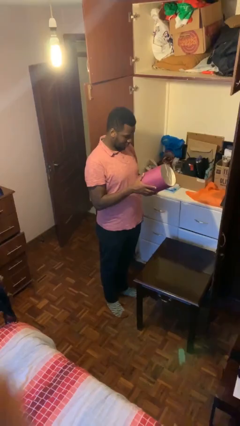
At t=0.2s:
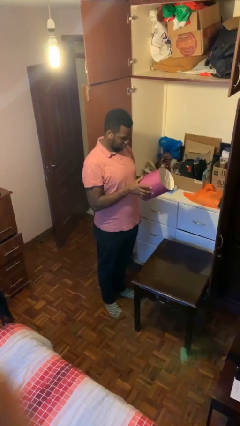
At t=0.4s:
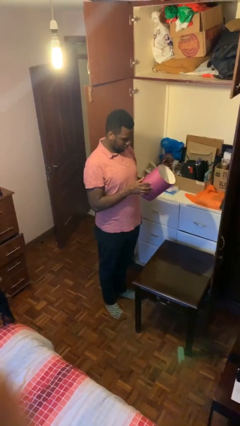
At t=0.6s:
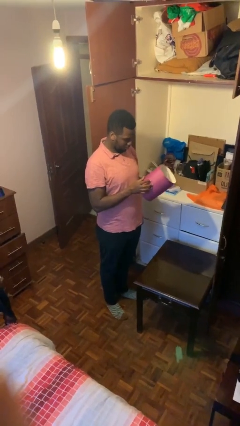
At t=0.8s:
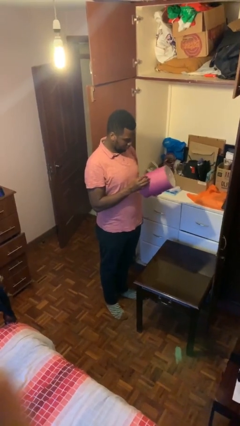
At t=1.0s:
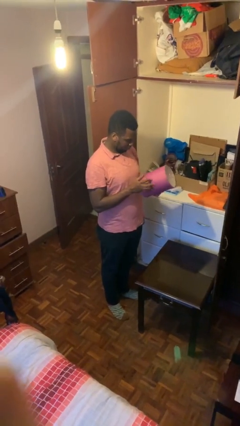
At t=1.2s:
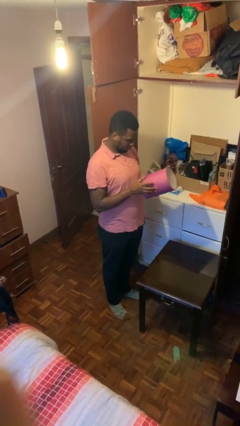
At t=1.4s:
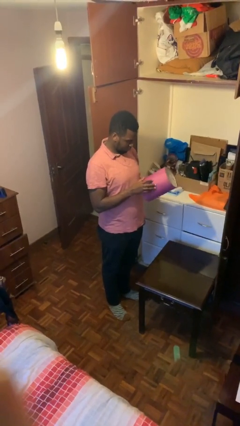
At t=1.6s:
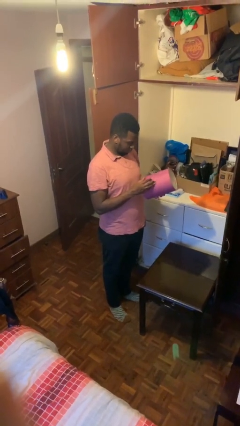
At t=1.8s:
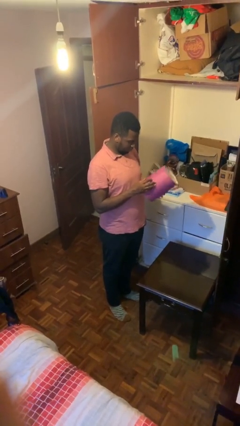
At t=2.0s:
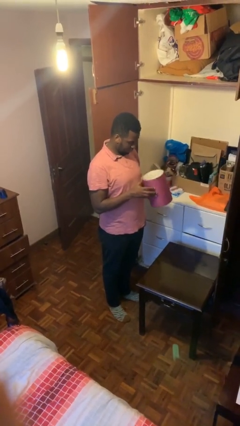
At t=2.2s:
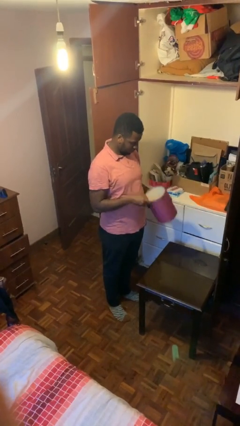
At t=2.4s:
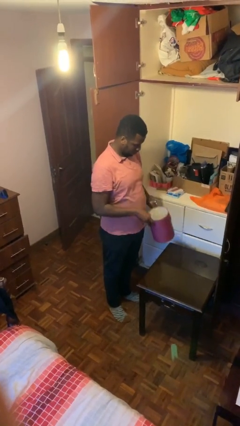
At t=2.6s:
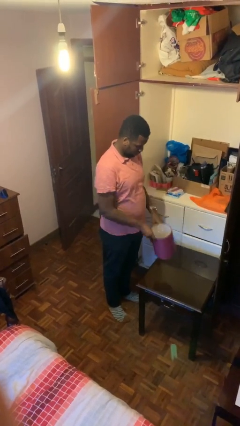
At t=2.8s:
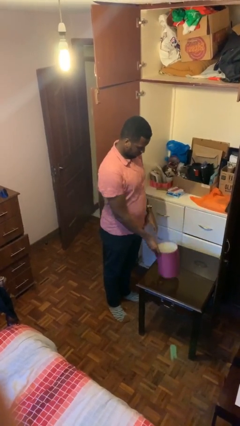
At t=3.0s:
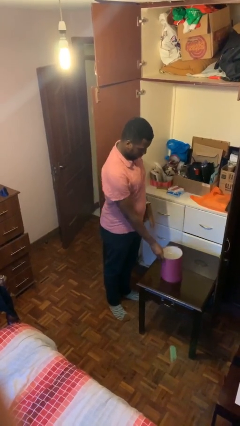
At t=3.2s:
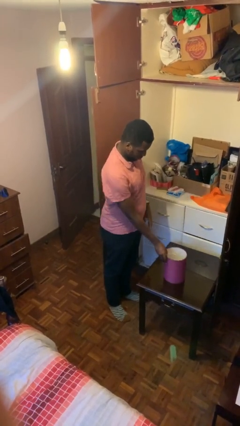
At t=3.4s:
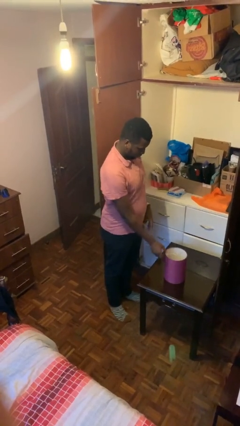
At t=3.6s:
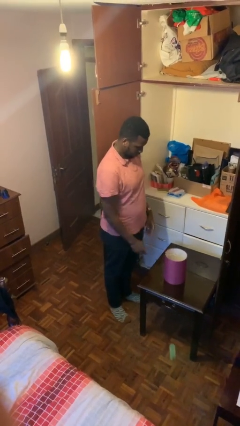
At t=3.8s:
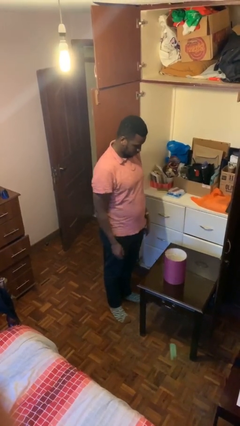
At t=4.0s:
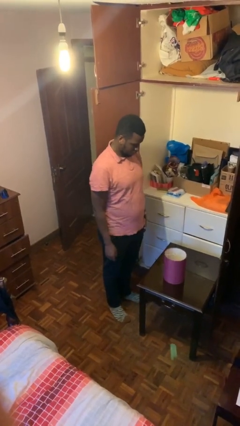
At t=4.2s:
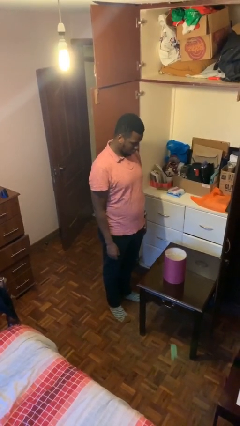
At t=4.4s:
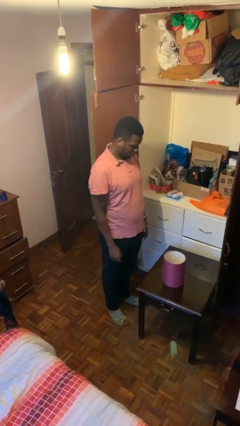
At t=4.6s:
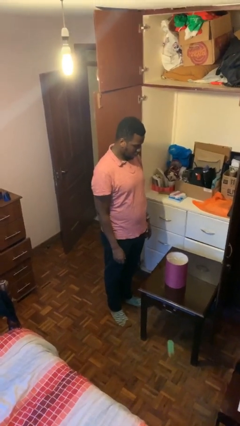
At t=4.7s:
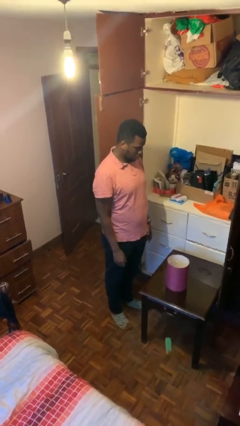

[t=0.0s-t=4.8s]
person puts down object on table

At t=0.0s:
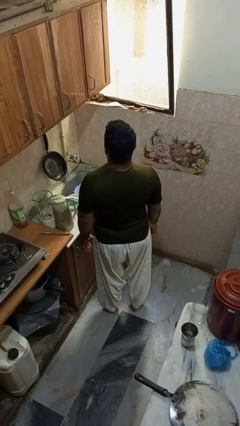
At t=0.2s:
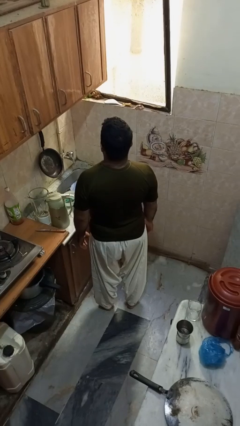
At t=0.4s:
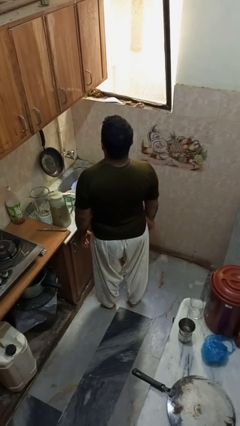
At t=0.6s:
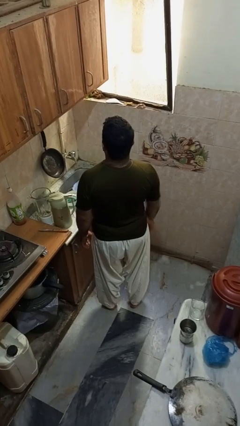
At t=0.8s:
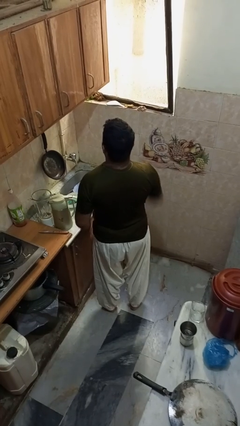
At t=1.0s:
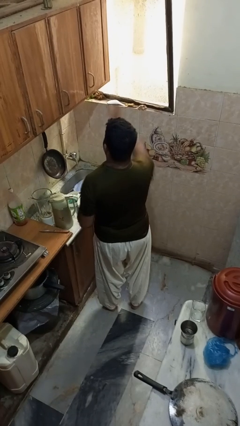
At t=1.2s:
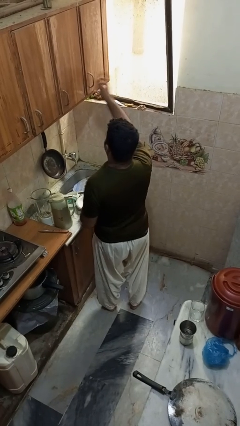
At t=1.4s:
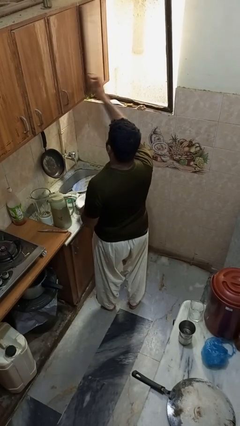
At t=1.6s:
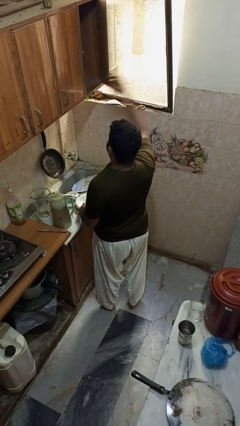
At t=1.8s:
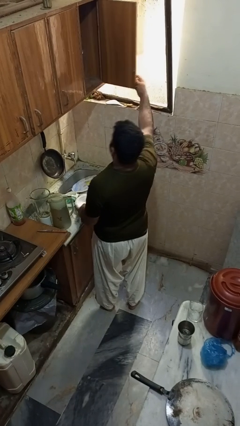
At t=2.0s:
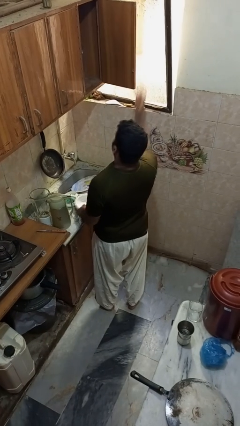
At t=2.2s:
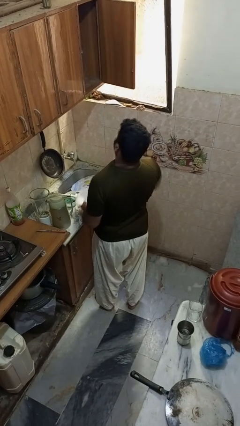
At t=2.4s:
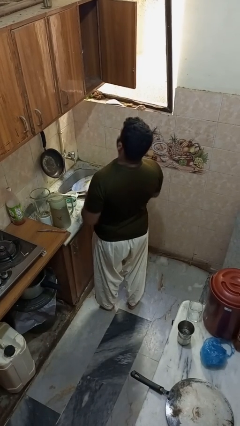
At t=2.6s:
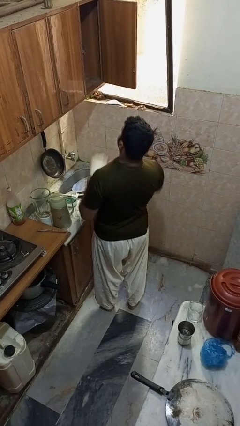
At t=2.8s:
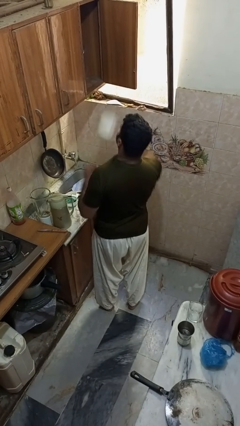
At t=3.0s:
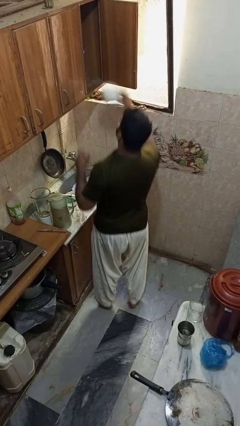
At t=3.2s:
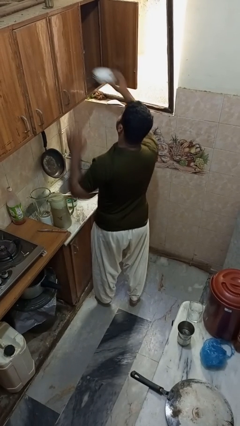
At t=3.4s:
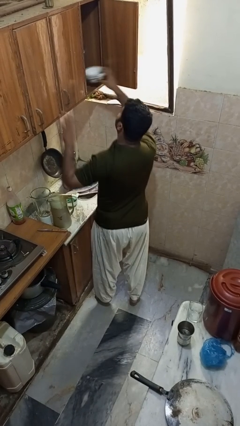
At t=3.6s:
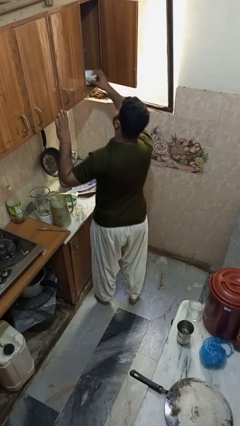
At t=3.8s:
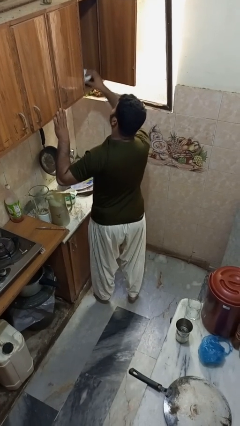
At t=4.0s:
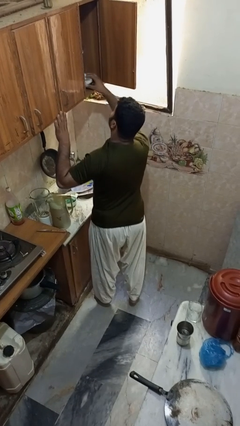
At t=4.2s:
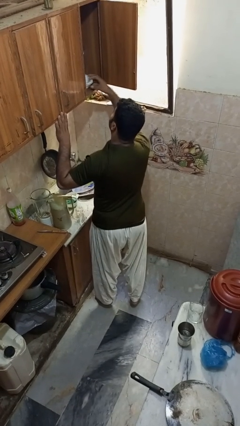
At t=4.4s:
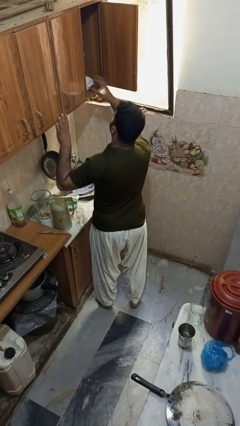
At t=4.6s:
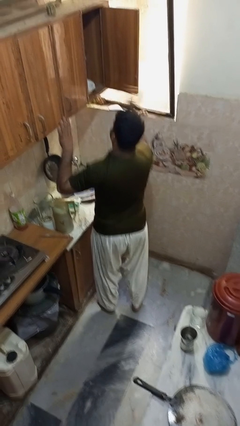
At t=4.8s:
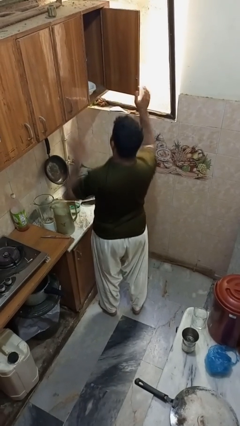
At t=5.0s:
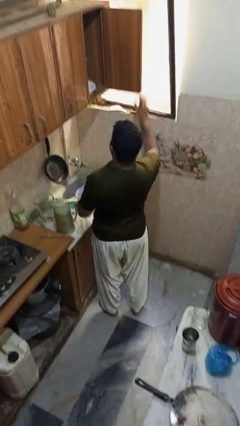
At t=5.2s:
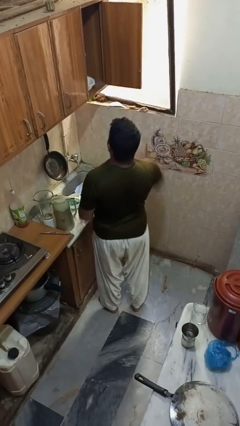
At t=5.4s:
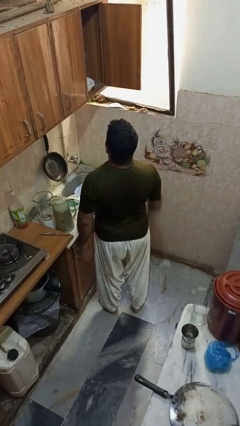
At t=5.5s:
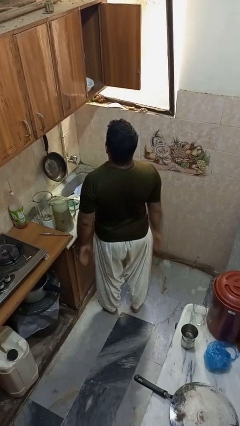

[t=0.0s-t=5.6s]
person puts object in cabinet

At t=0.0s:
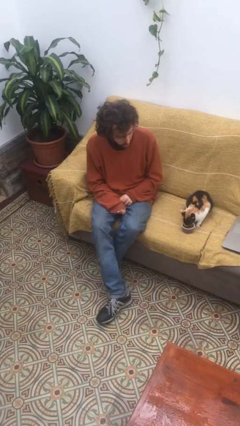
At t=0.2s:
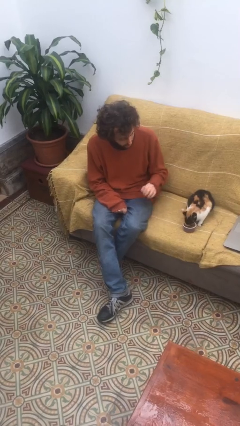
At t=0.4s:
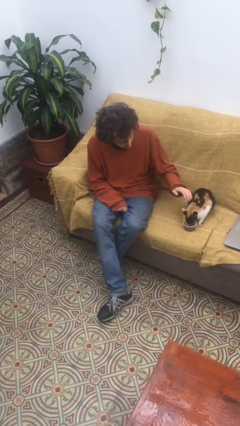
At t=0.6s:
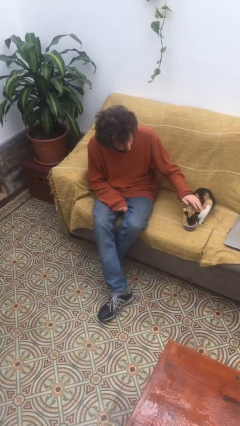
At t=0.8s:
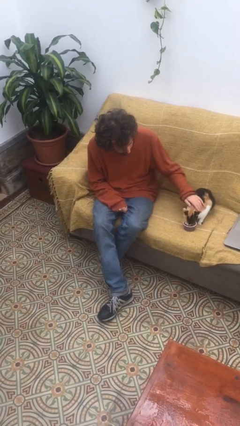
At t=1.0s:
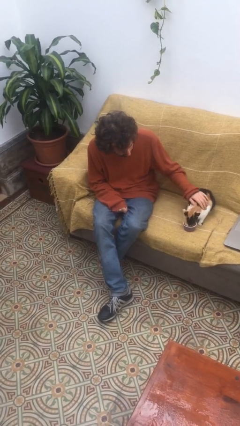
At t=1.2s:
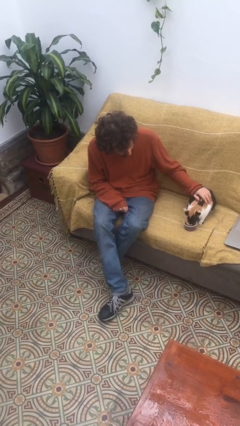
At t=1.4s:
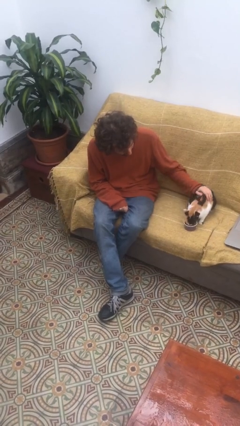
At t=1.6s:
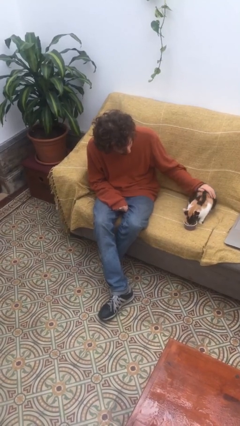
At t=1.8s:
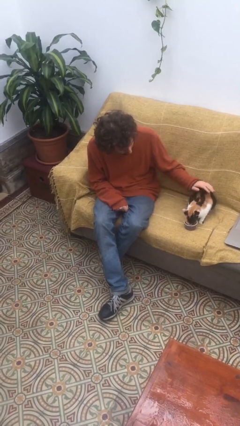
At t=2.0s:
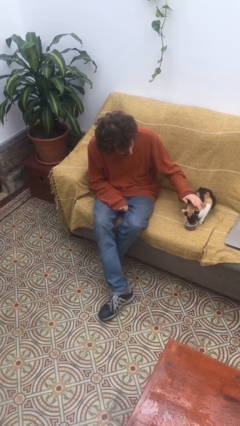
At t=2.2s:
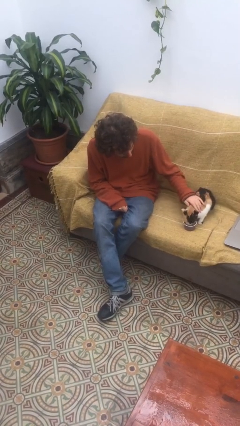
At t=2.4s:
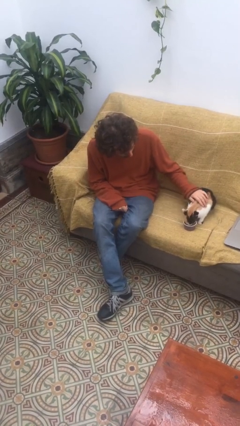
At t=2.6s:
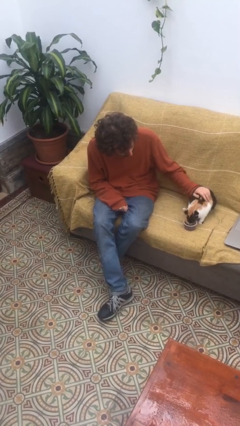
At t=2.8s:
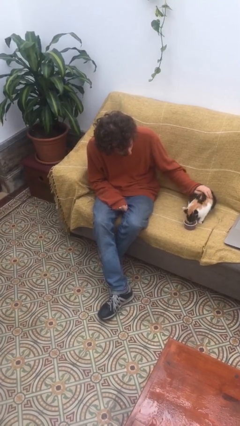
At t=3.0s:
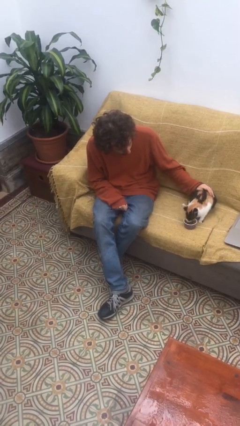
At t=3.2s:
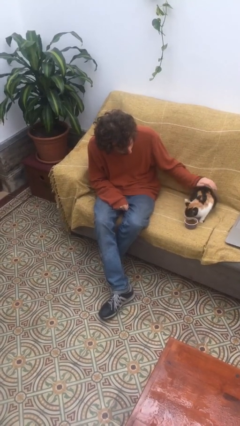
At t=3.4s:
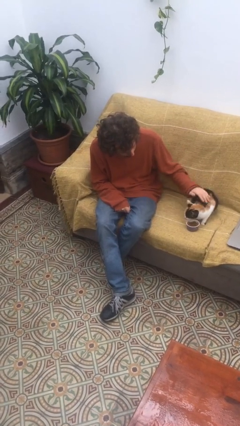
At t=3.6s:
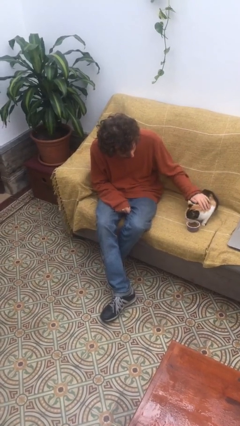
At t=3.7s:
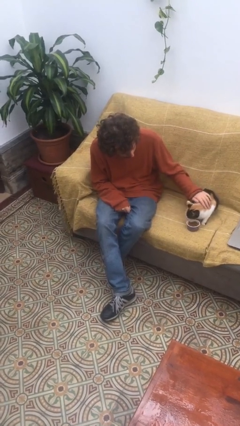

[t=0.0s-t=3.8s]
person pets cat

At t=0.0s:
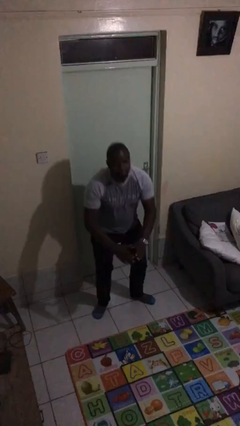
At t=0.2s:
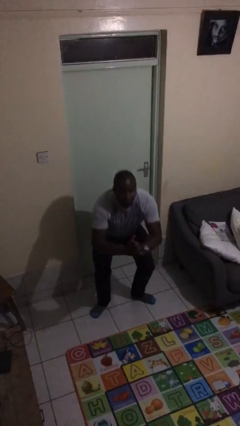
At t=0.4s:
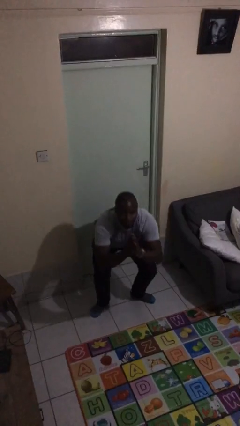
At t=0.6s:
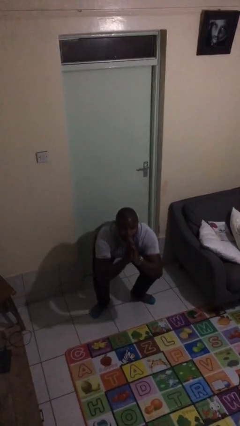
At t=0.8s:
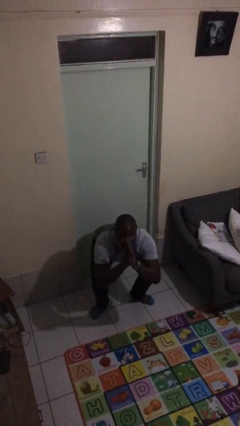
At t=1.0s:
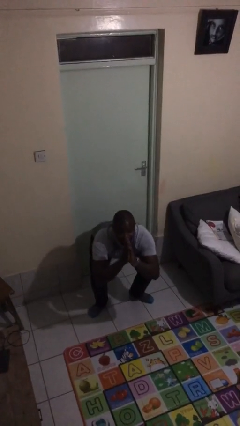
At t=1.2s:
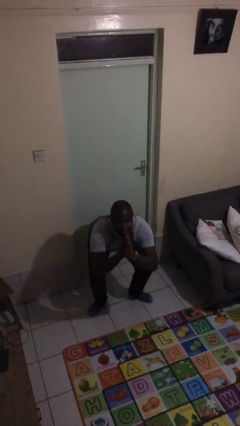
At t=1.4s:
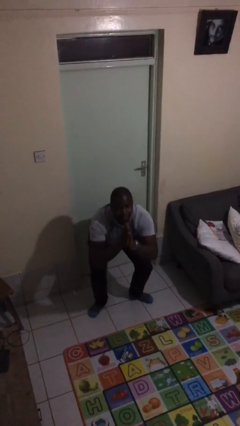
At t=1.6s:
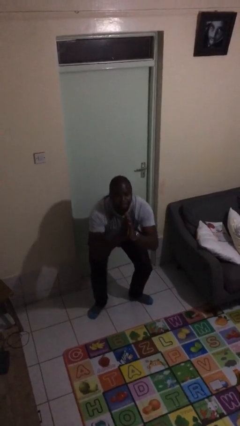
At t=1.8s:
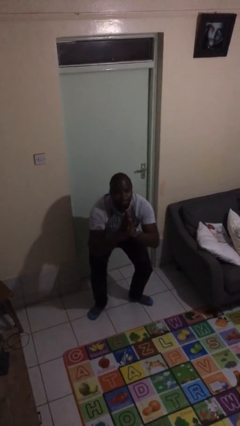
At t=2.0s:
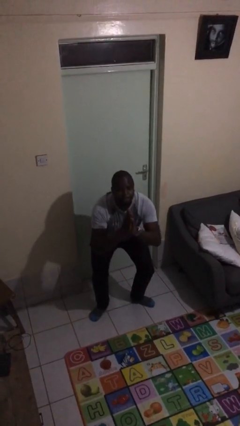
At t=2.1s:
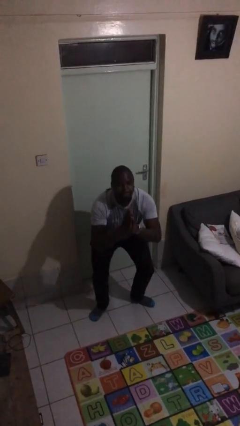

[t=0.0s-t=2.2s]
person squats

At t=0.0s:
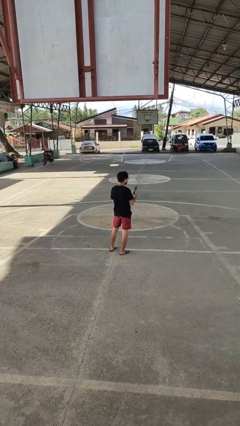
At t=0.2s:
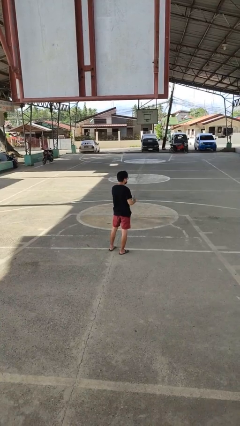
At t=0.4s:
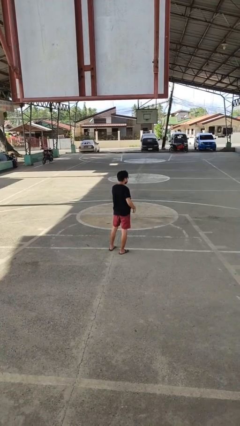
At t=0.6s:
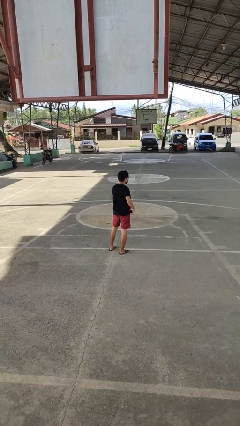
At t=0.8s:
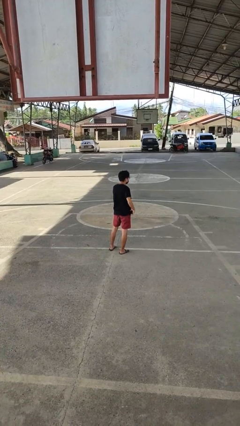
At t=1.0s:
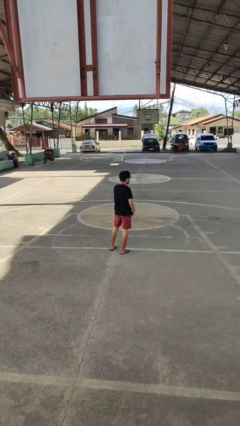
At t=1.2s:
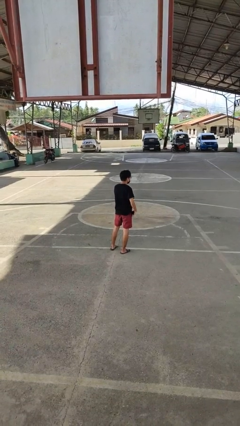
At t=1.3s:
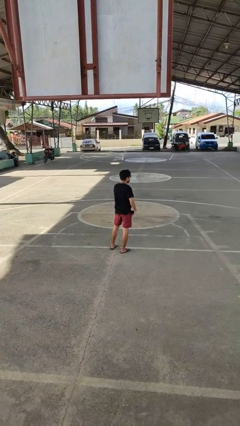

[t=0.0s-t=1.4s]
person puts phone into pocket
